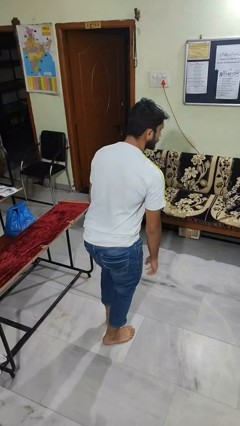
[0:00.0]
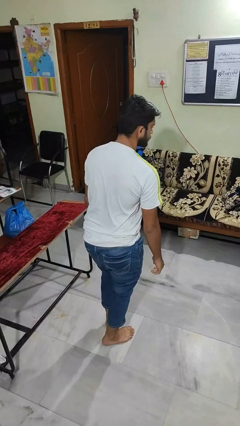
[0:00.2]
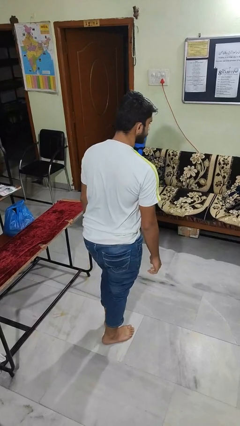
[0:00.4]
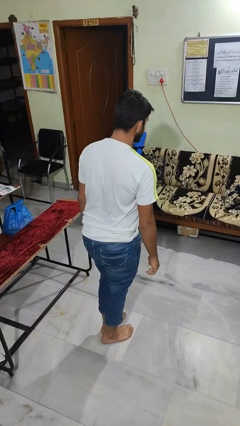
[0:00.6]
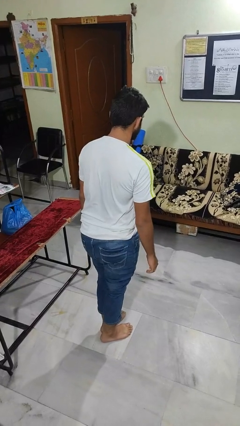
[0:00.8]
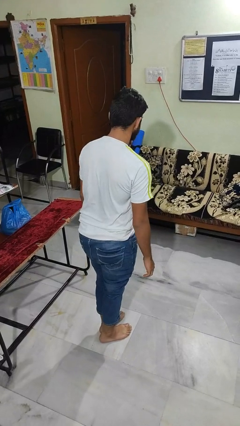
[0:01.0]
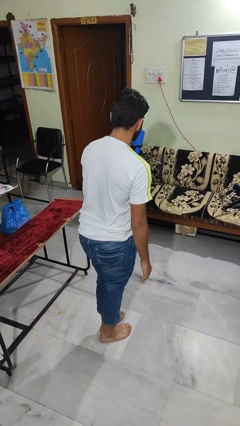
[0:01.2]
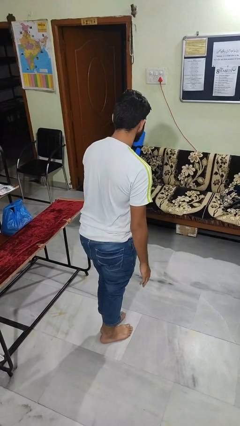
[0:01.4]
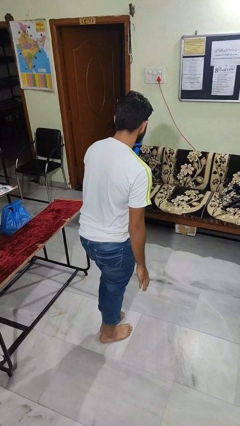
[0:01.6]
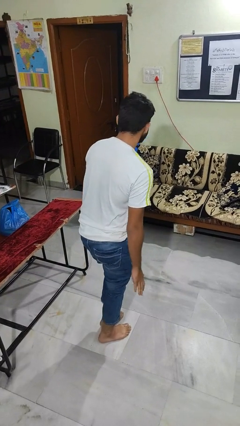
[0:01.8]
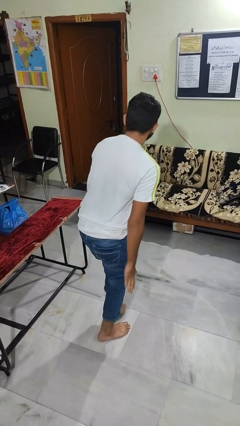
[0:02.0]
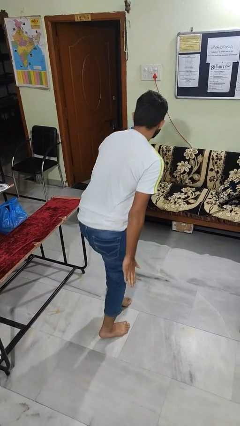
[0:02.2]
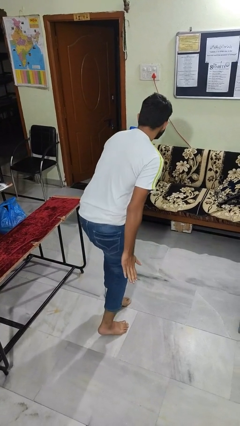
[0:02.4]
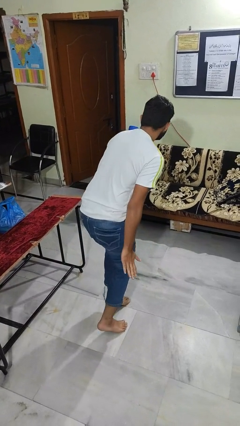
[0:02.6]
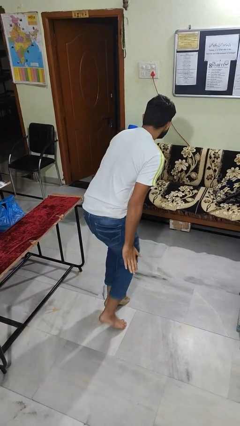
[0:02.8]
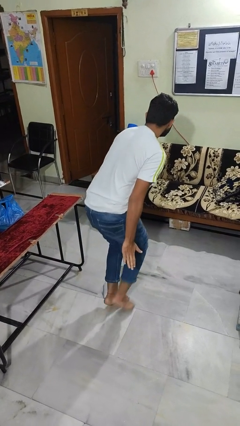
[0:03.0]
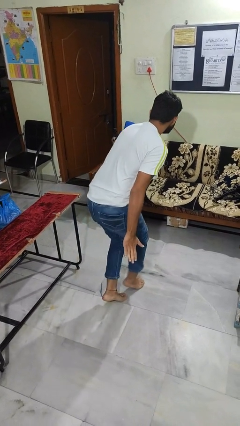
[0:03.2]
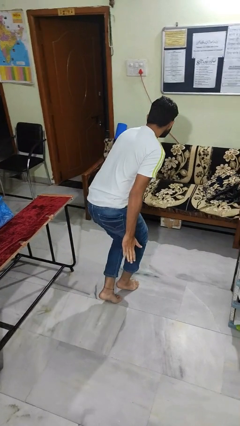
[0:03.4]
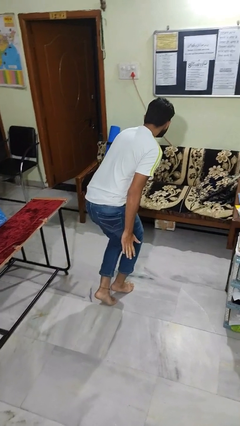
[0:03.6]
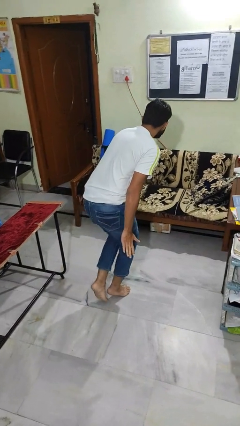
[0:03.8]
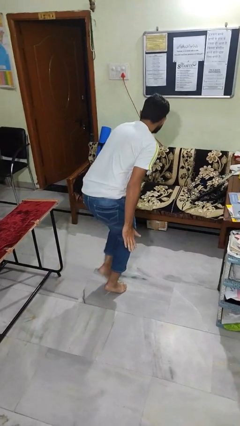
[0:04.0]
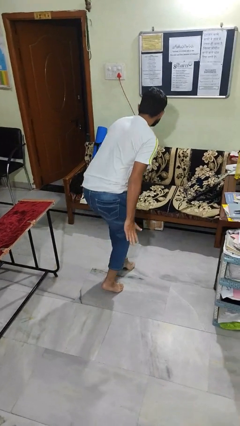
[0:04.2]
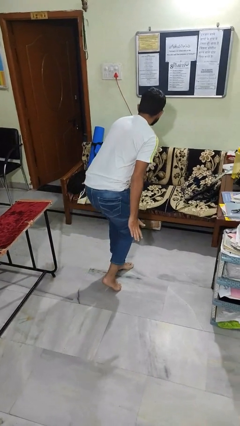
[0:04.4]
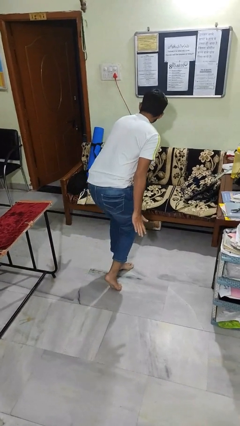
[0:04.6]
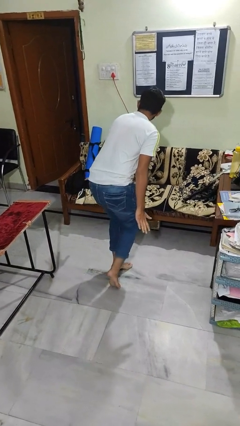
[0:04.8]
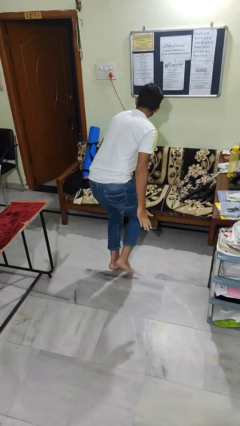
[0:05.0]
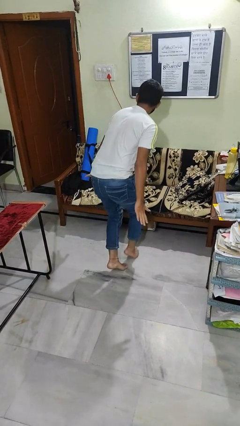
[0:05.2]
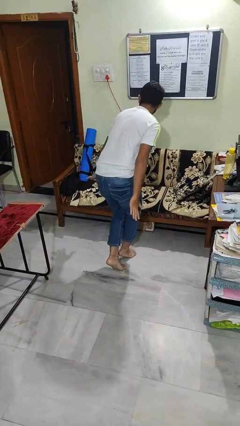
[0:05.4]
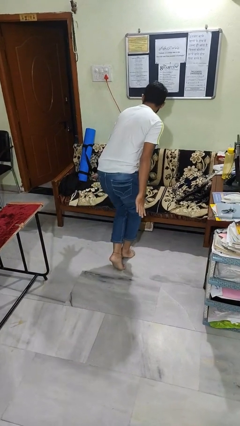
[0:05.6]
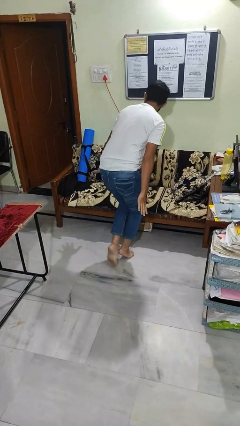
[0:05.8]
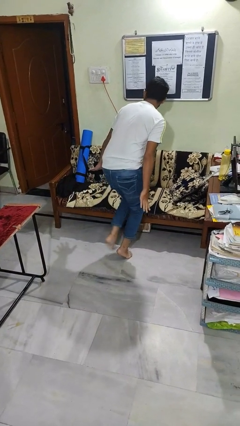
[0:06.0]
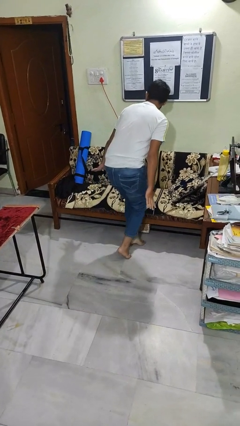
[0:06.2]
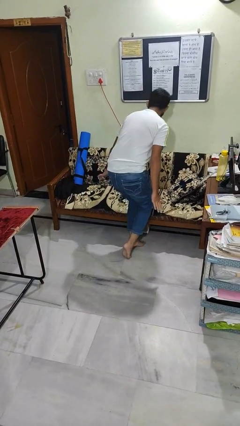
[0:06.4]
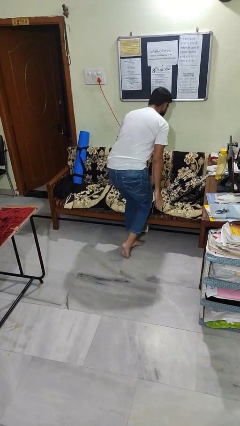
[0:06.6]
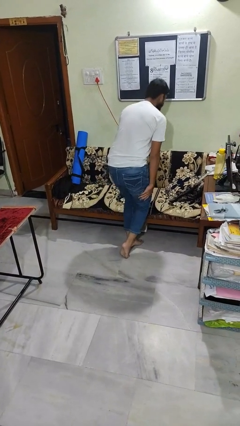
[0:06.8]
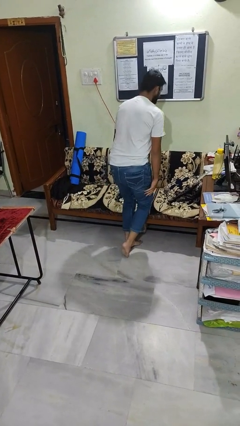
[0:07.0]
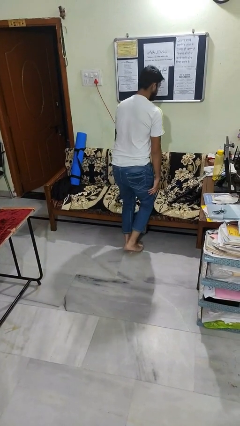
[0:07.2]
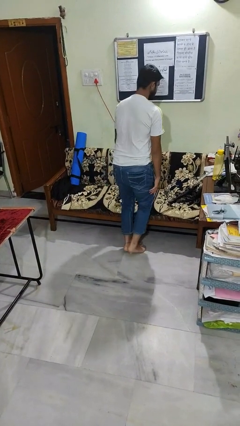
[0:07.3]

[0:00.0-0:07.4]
person walks tiptoe

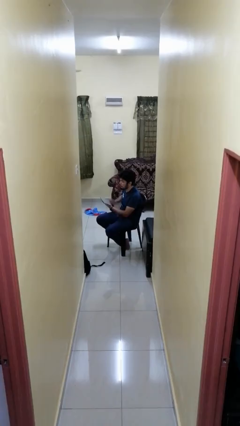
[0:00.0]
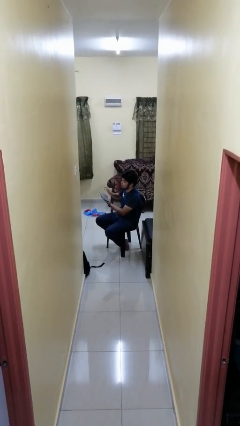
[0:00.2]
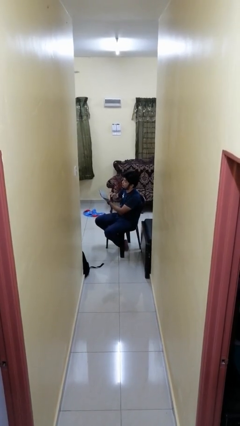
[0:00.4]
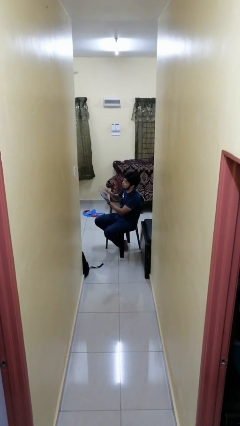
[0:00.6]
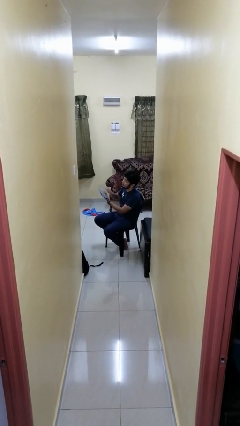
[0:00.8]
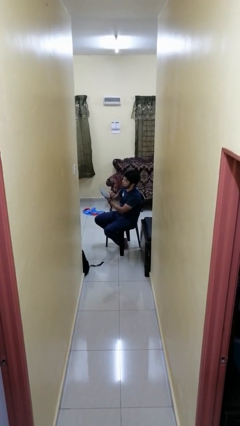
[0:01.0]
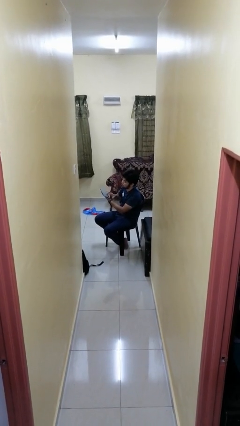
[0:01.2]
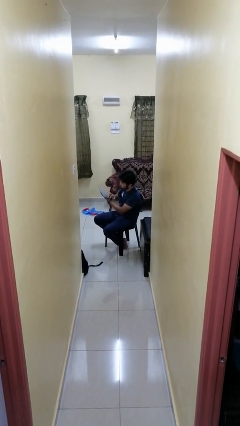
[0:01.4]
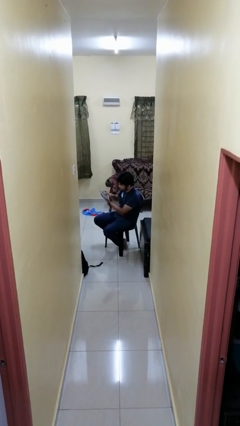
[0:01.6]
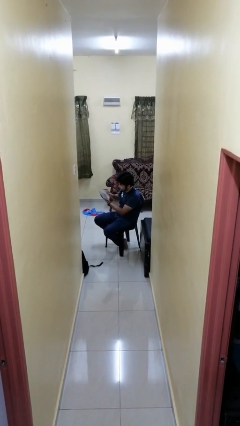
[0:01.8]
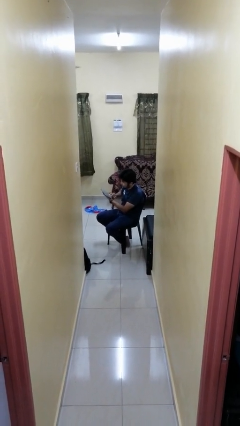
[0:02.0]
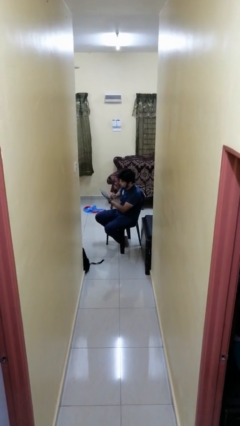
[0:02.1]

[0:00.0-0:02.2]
person interacts with tablet

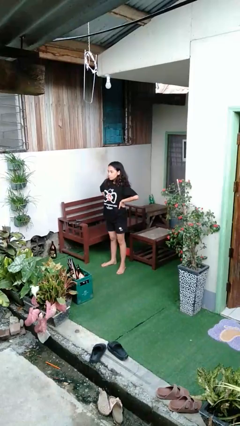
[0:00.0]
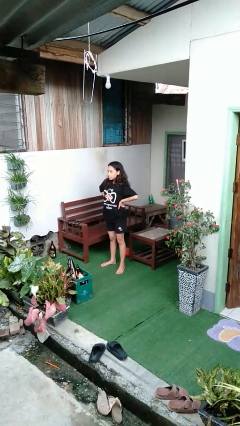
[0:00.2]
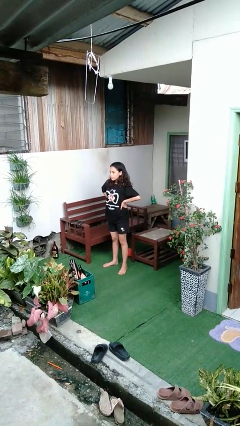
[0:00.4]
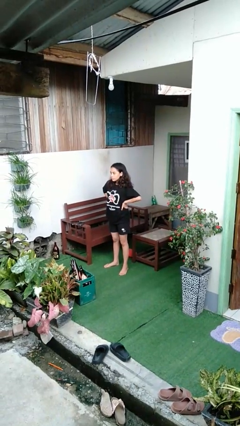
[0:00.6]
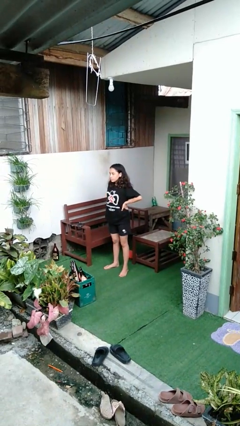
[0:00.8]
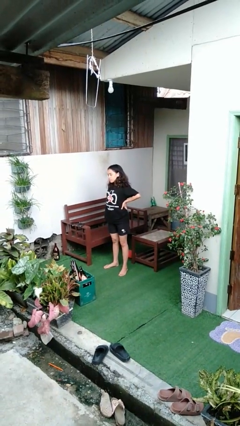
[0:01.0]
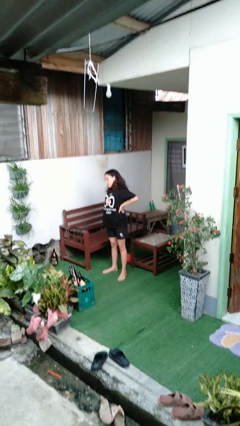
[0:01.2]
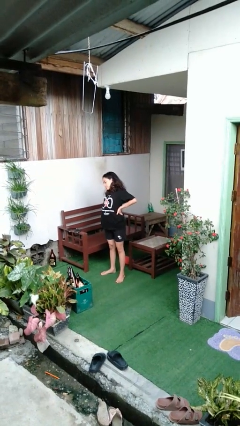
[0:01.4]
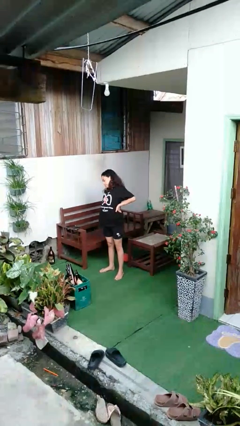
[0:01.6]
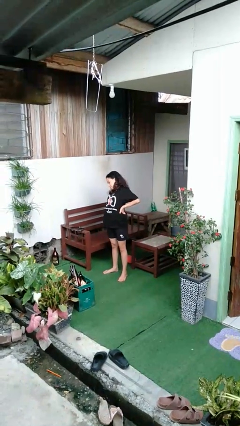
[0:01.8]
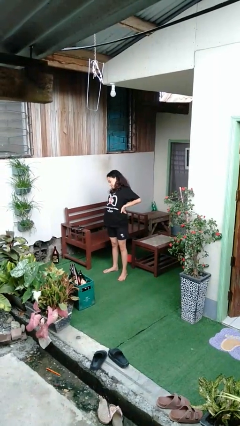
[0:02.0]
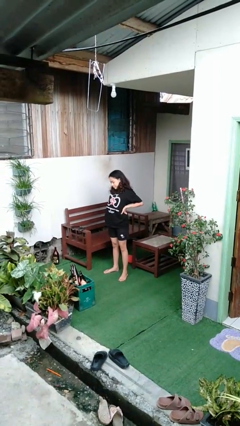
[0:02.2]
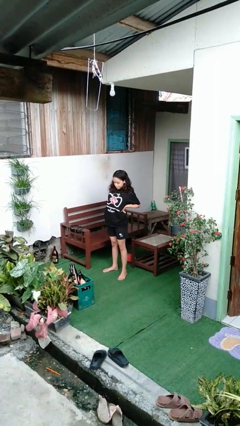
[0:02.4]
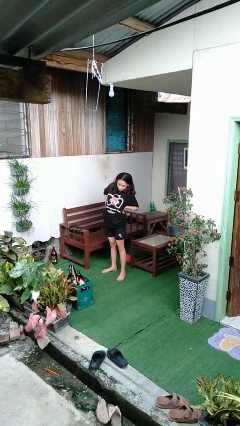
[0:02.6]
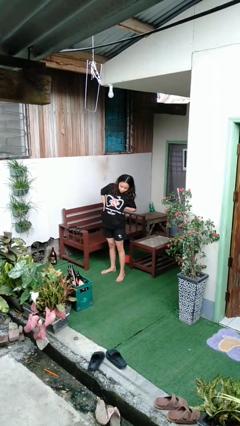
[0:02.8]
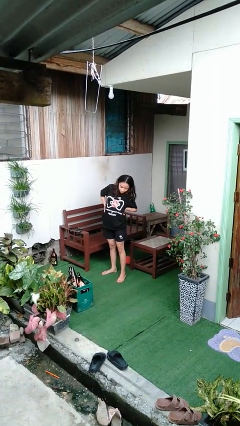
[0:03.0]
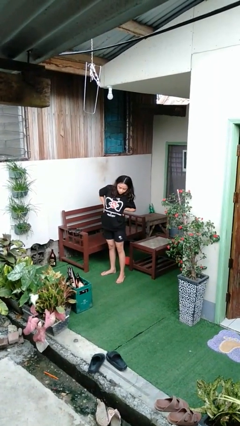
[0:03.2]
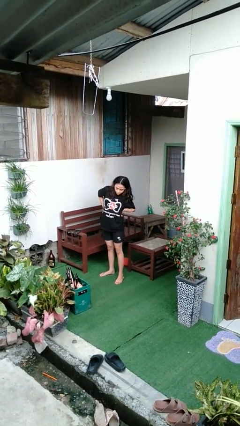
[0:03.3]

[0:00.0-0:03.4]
person stretches back

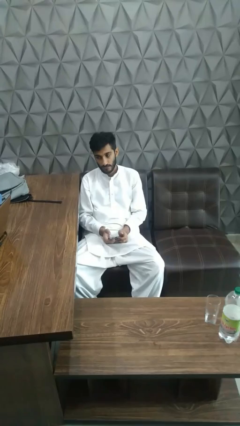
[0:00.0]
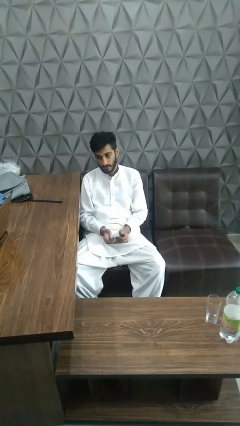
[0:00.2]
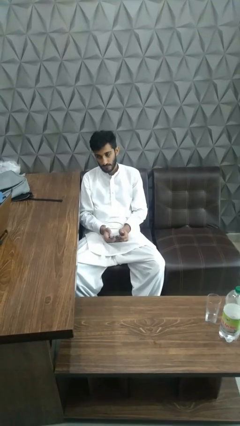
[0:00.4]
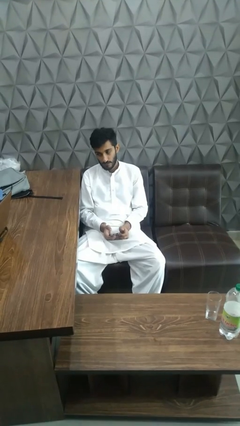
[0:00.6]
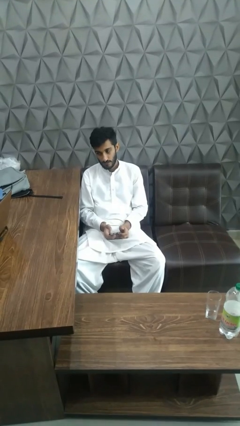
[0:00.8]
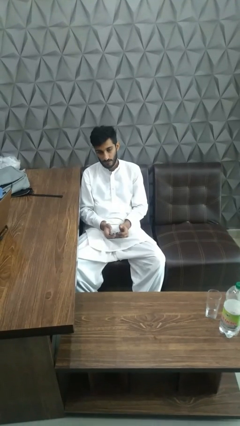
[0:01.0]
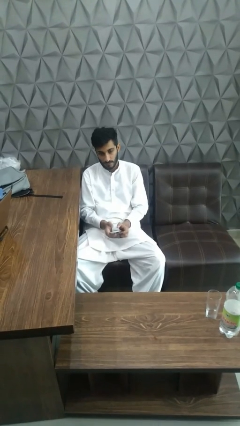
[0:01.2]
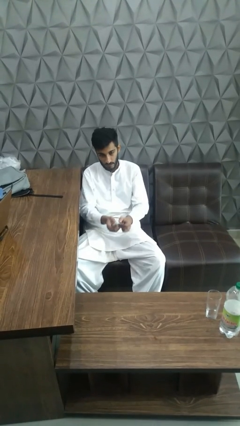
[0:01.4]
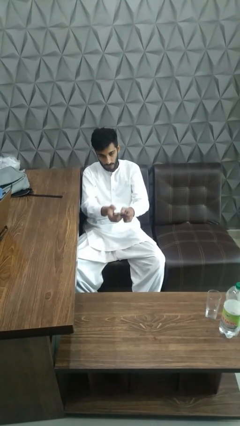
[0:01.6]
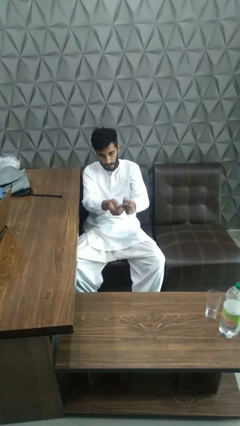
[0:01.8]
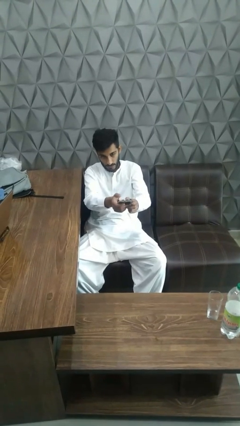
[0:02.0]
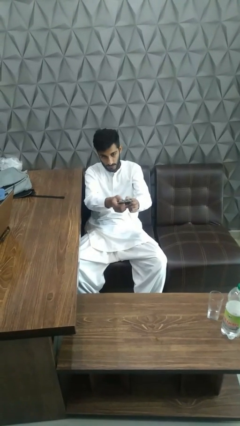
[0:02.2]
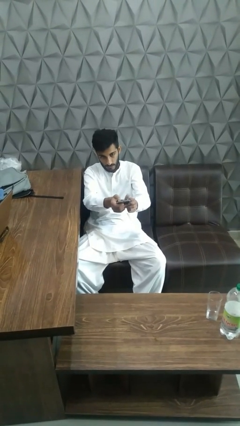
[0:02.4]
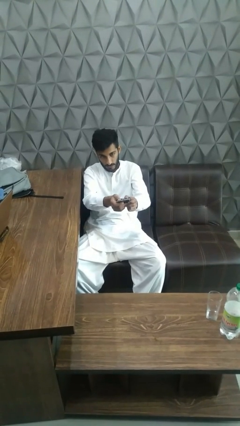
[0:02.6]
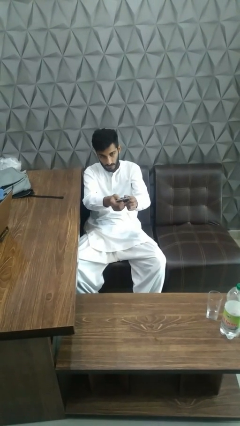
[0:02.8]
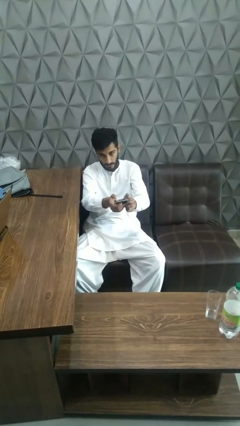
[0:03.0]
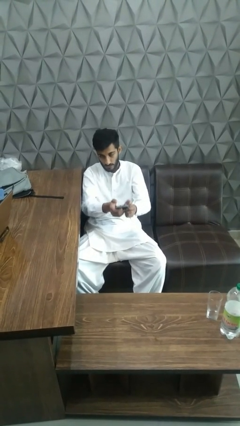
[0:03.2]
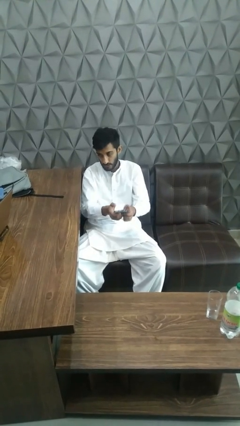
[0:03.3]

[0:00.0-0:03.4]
person uses television remote

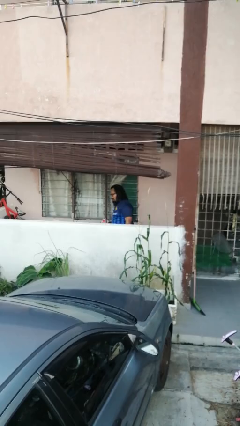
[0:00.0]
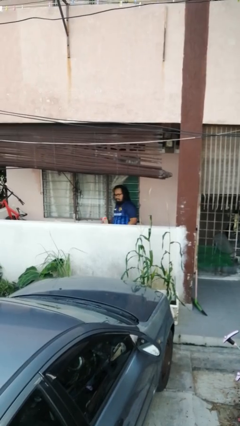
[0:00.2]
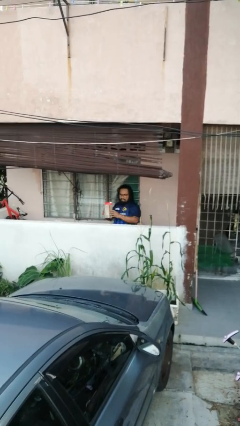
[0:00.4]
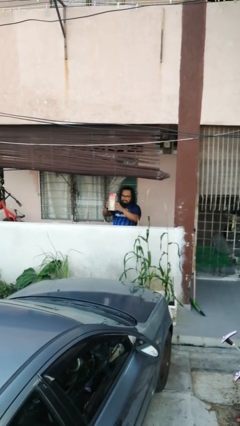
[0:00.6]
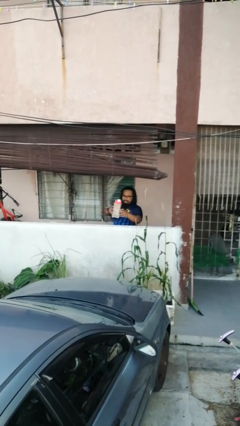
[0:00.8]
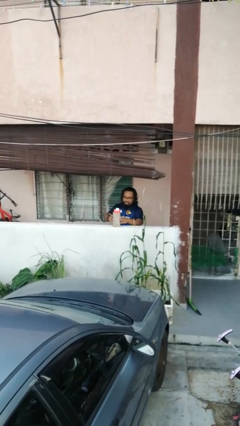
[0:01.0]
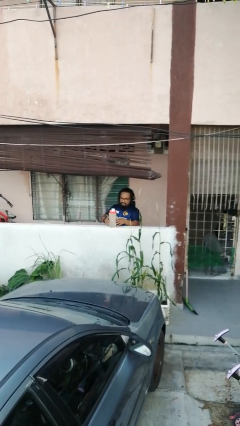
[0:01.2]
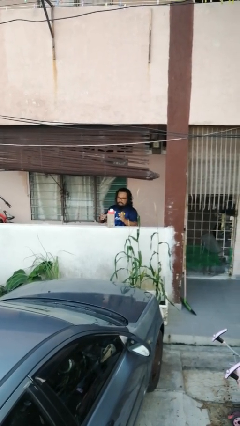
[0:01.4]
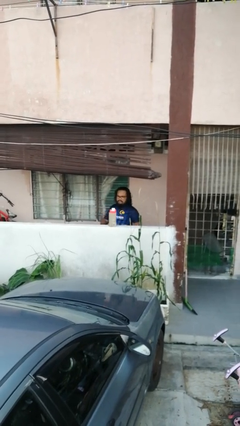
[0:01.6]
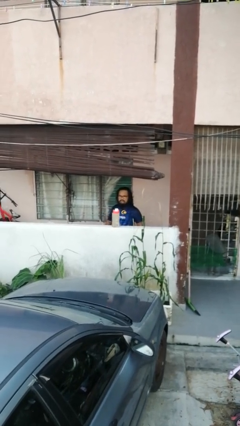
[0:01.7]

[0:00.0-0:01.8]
person puts down object on countertop
